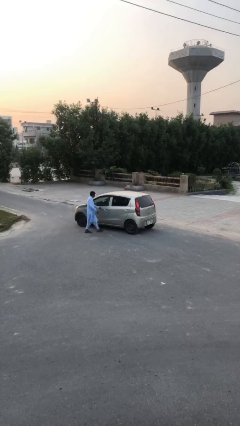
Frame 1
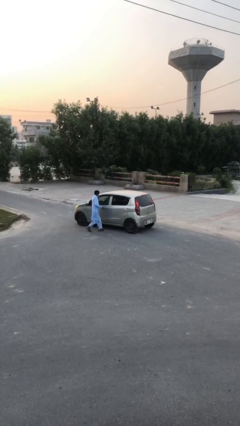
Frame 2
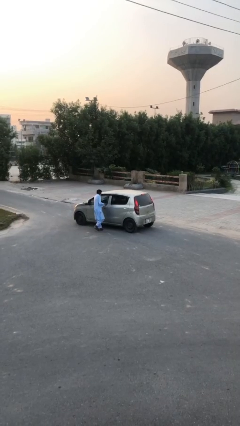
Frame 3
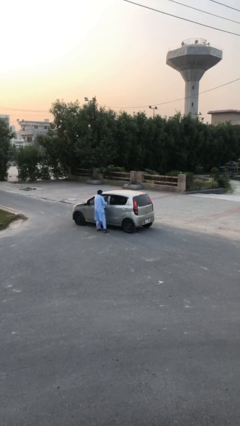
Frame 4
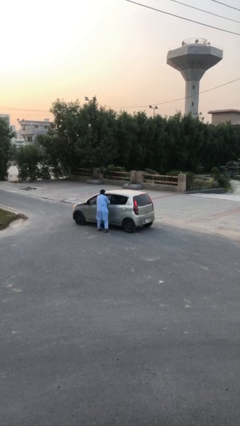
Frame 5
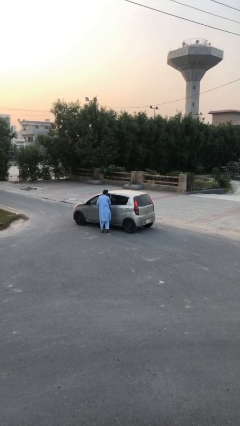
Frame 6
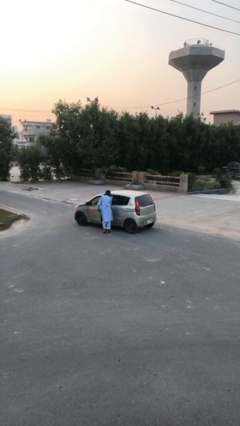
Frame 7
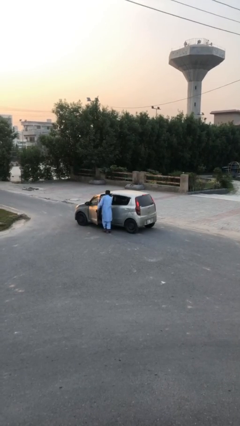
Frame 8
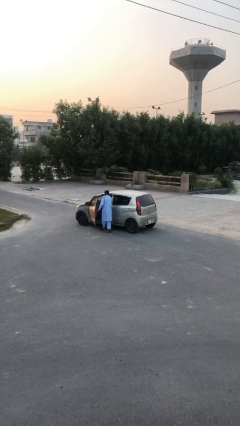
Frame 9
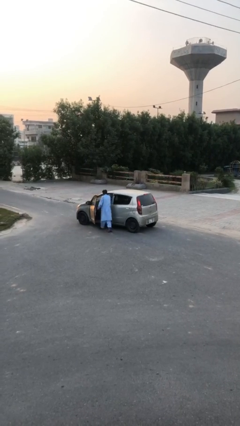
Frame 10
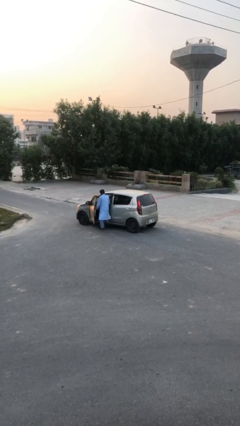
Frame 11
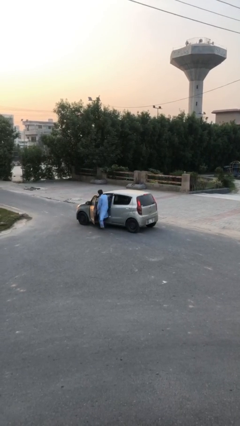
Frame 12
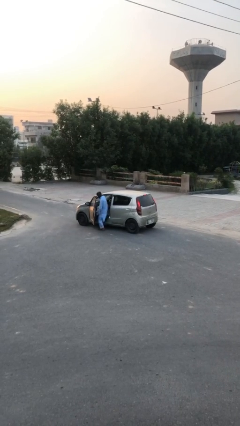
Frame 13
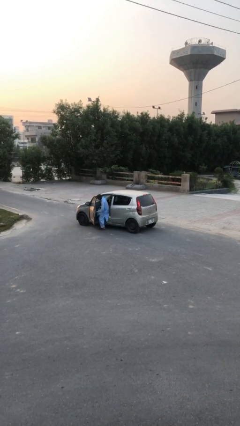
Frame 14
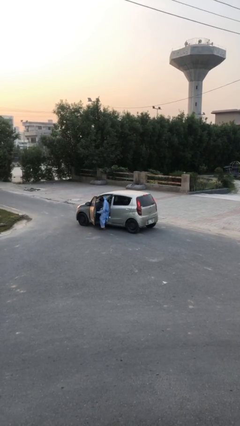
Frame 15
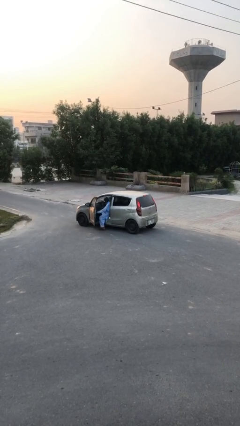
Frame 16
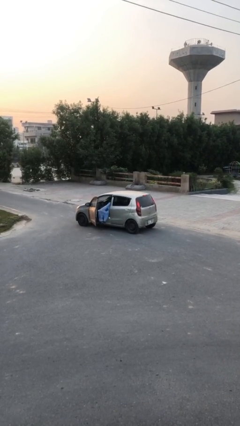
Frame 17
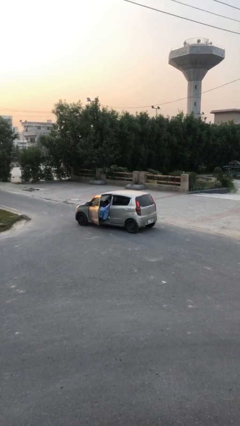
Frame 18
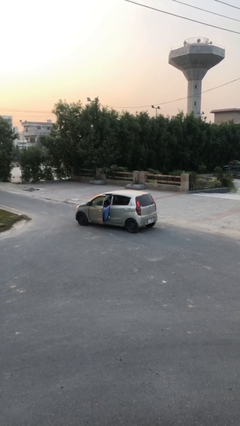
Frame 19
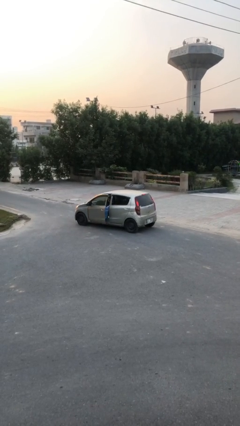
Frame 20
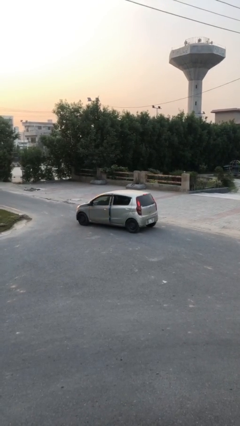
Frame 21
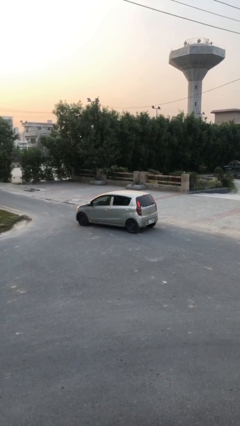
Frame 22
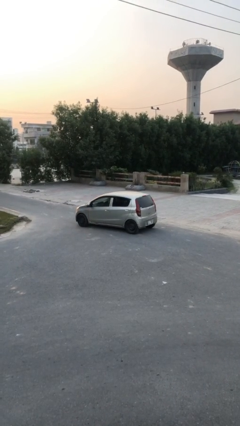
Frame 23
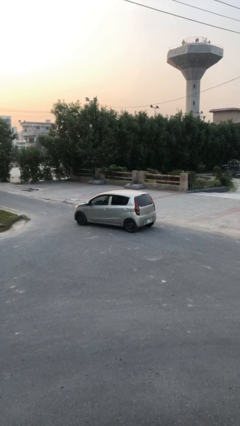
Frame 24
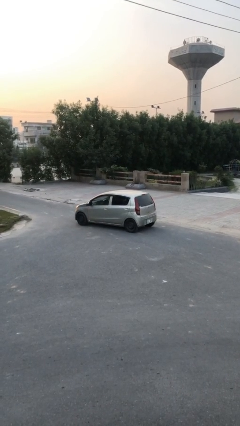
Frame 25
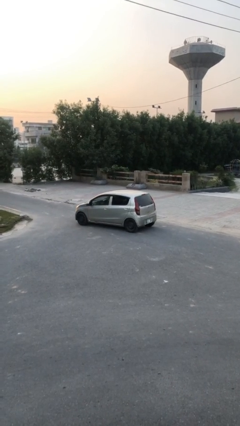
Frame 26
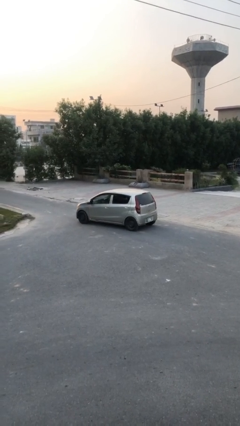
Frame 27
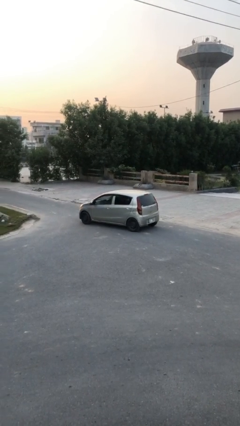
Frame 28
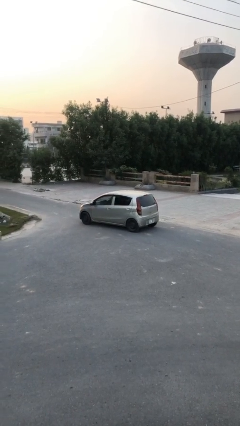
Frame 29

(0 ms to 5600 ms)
car picks up person

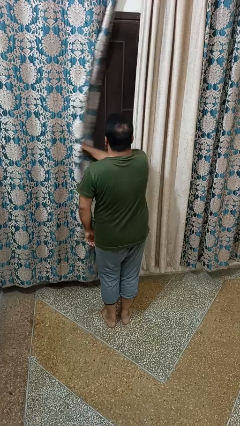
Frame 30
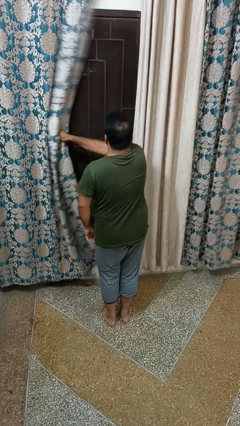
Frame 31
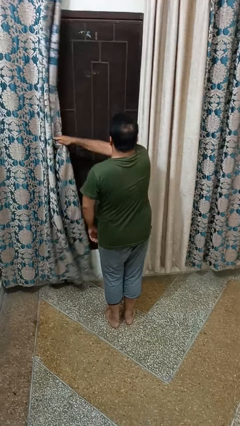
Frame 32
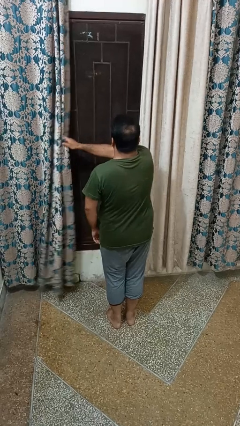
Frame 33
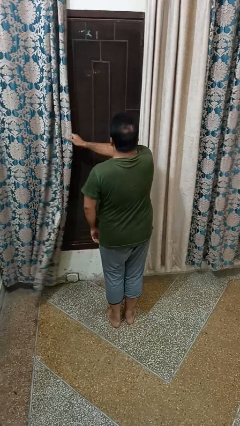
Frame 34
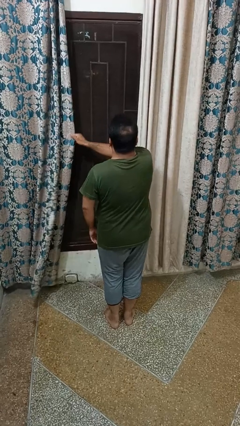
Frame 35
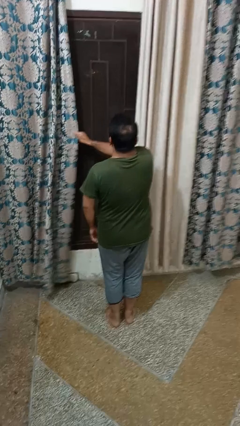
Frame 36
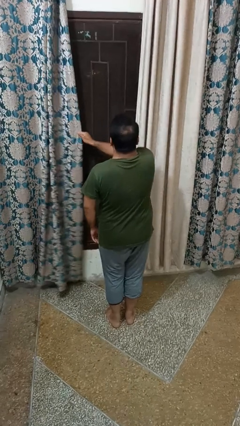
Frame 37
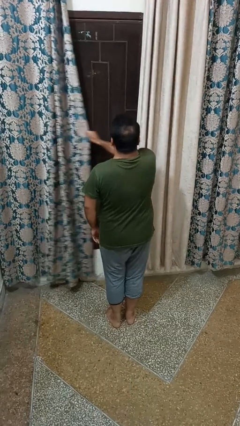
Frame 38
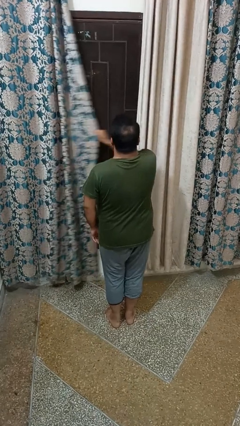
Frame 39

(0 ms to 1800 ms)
person opens curtains

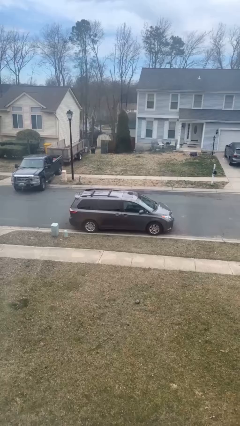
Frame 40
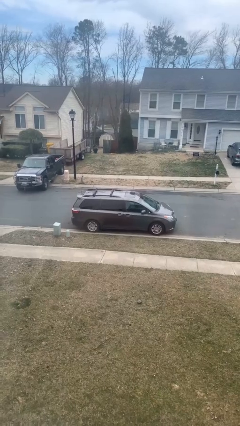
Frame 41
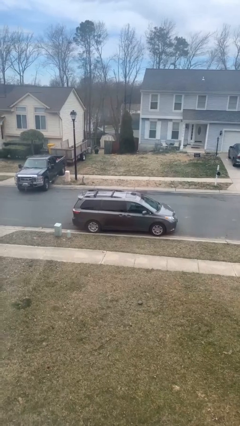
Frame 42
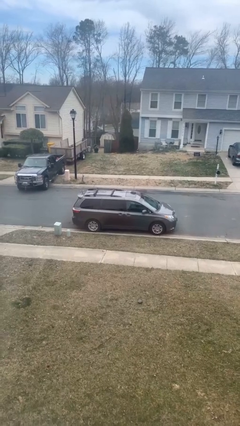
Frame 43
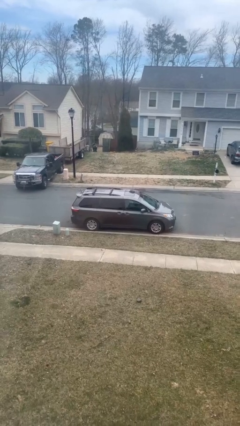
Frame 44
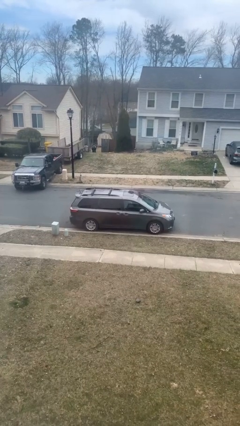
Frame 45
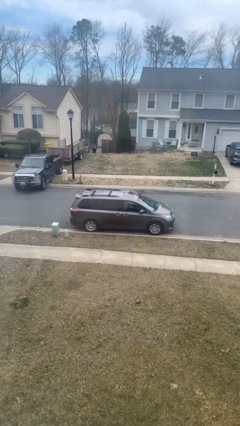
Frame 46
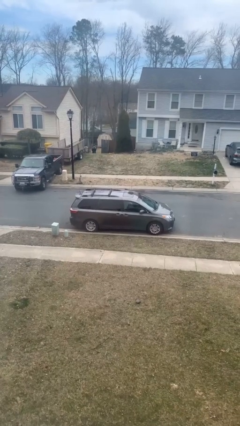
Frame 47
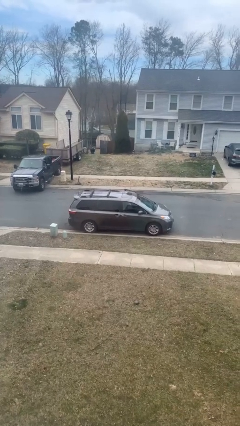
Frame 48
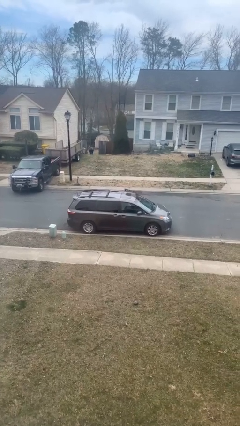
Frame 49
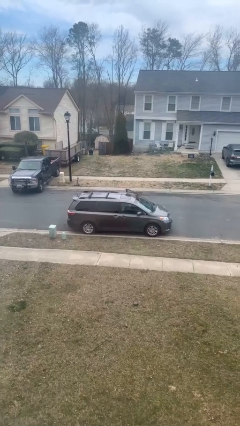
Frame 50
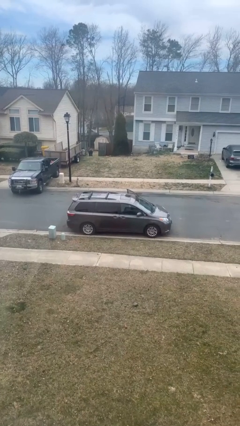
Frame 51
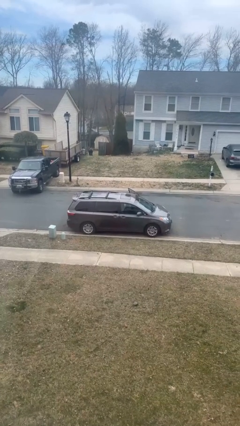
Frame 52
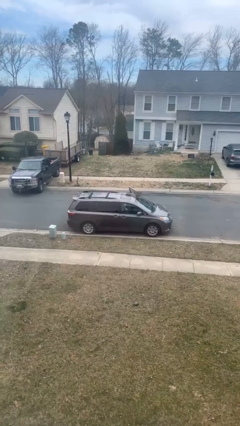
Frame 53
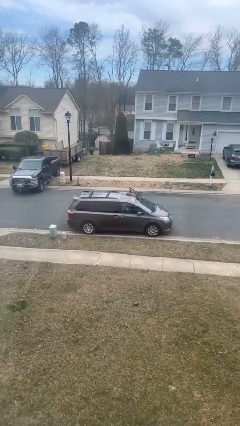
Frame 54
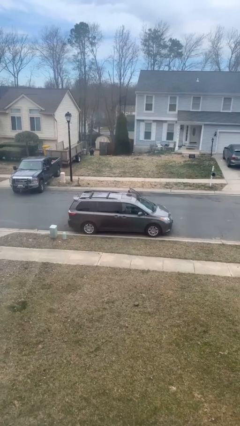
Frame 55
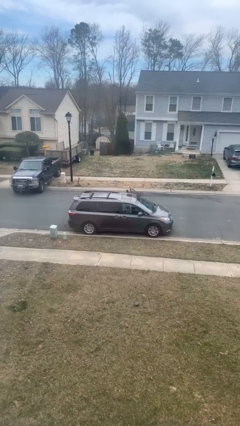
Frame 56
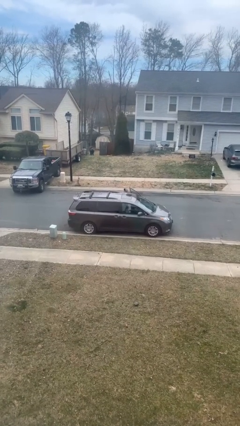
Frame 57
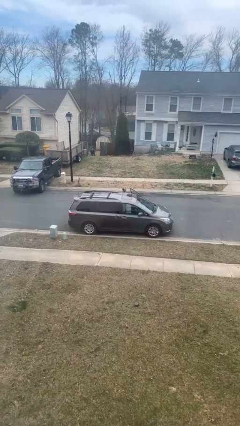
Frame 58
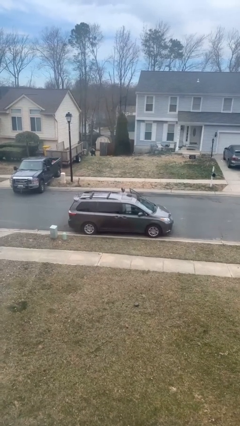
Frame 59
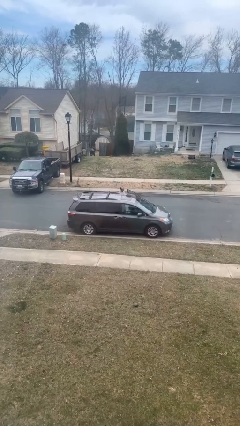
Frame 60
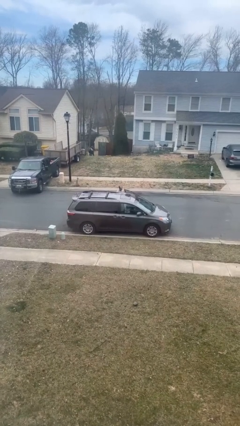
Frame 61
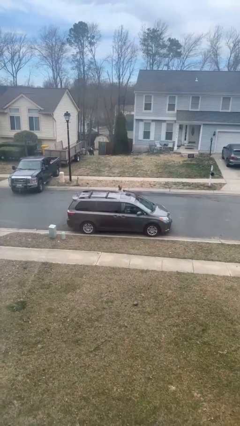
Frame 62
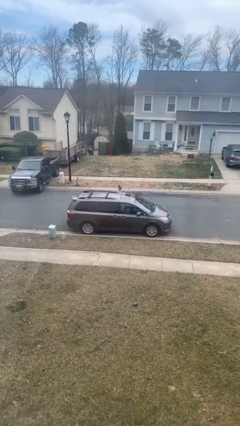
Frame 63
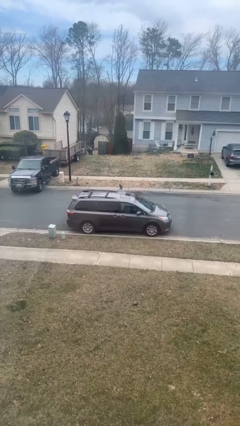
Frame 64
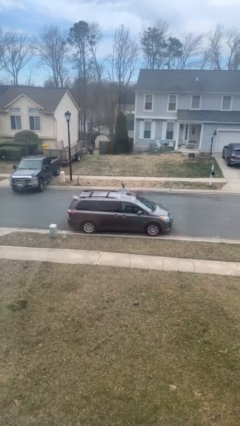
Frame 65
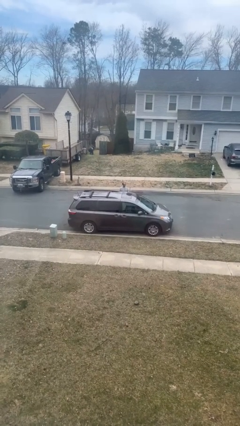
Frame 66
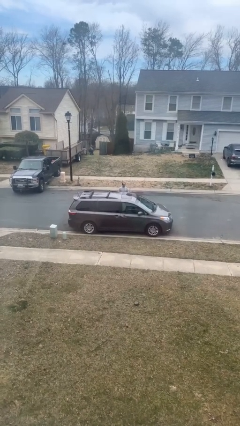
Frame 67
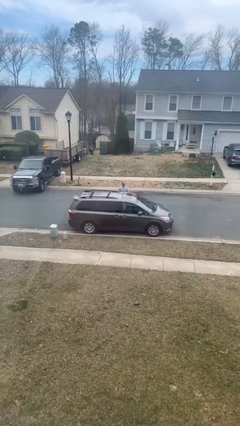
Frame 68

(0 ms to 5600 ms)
car drops off person

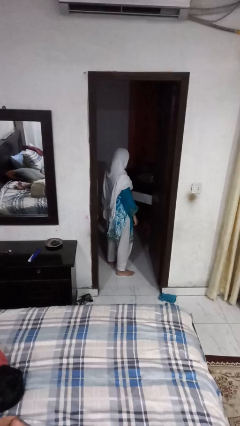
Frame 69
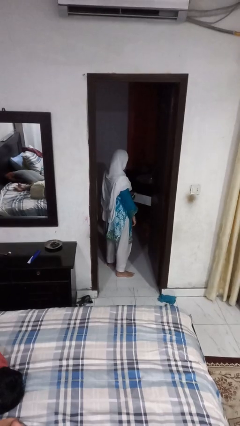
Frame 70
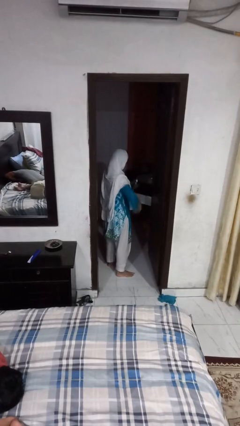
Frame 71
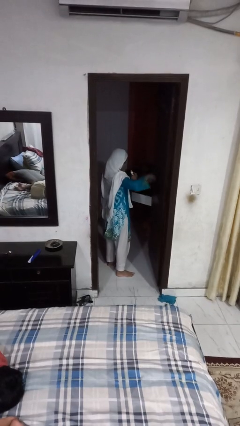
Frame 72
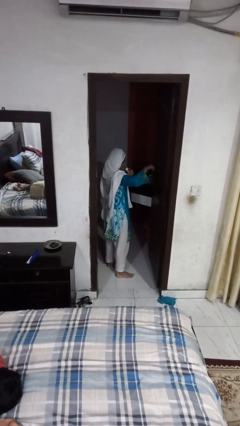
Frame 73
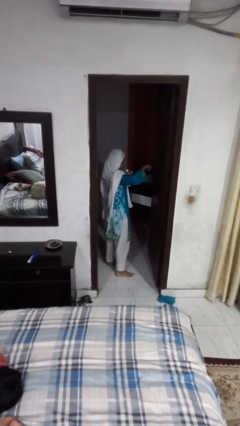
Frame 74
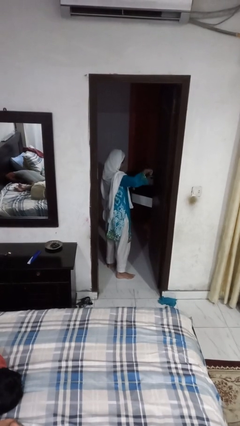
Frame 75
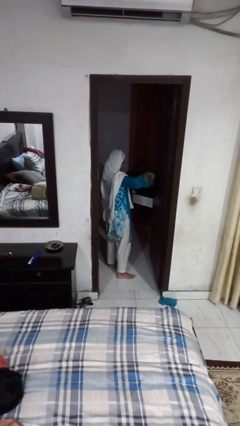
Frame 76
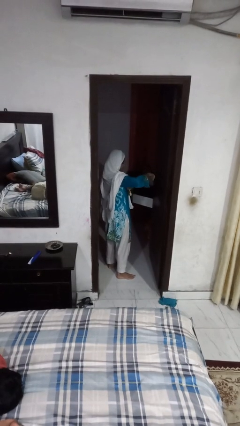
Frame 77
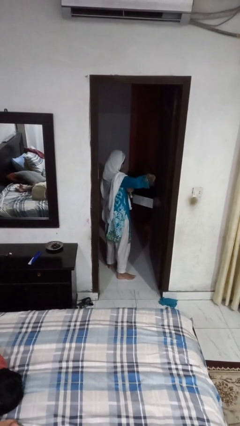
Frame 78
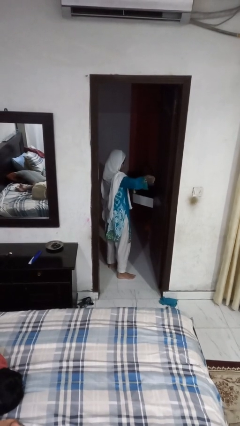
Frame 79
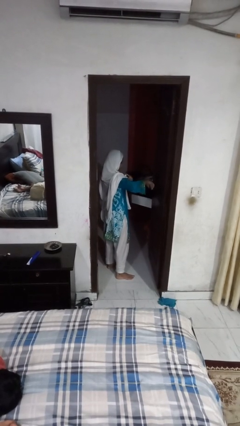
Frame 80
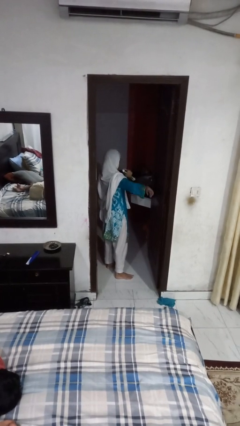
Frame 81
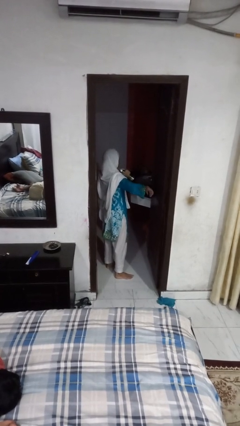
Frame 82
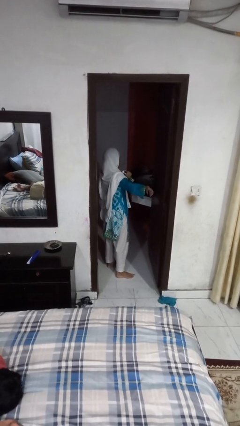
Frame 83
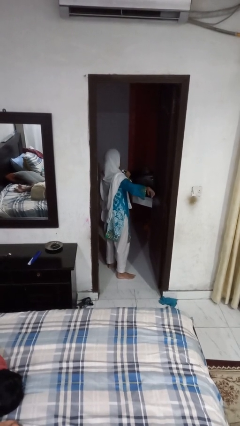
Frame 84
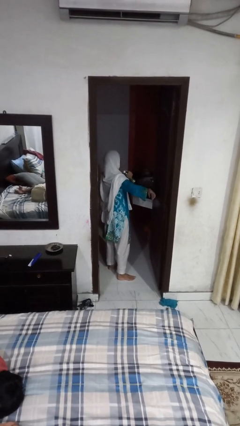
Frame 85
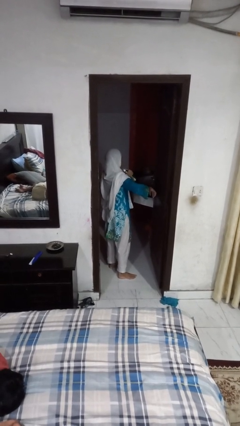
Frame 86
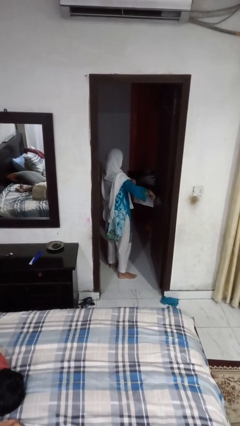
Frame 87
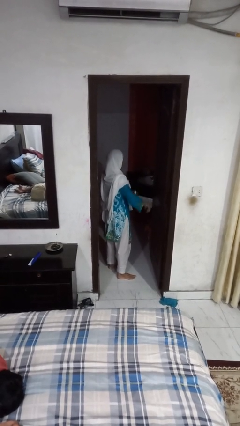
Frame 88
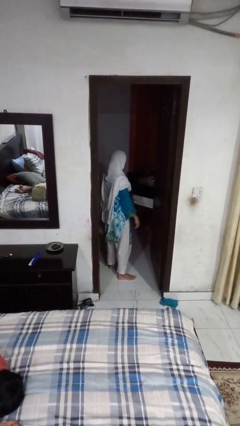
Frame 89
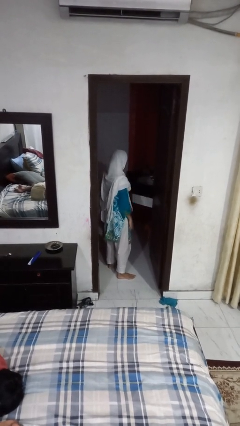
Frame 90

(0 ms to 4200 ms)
person applies deodorant

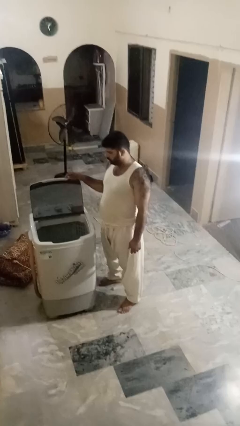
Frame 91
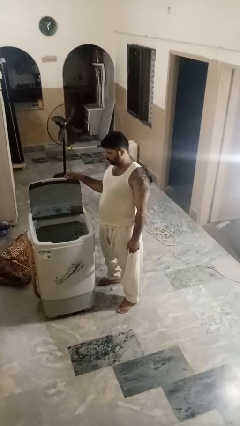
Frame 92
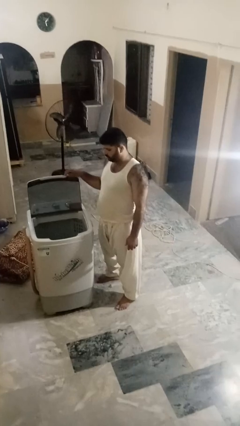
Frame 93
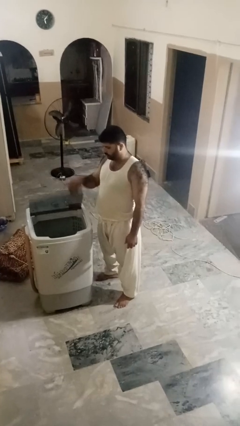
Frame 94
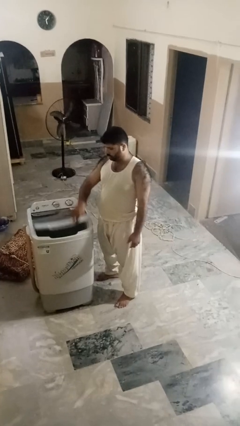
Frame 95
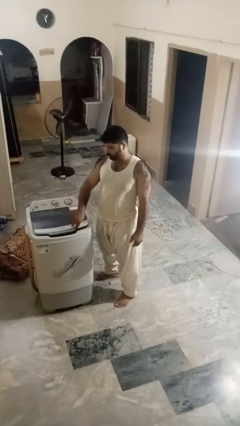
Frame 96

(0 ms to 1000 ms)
person closes clothes washer
